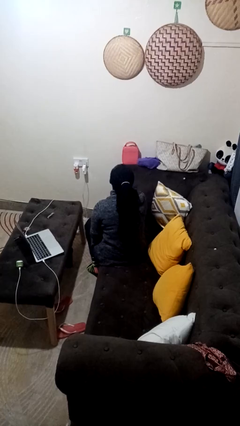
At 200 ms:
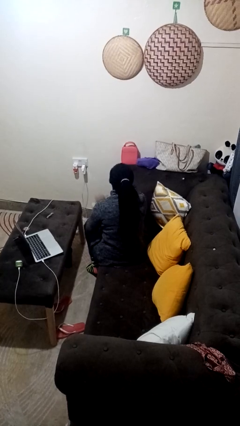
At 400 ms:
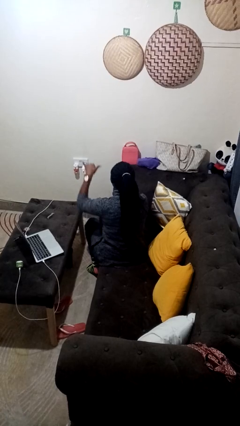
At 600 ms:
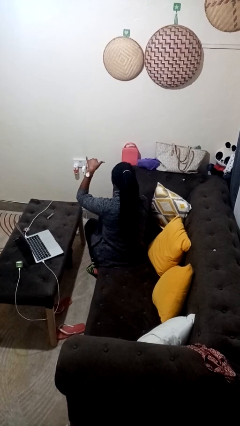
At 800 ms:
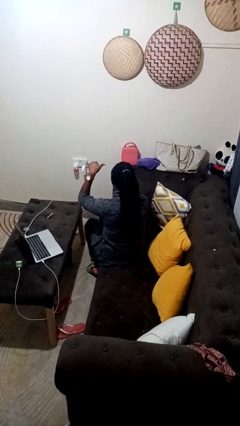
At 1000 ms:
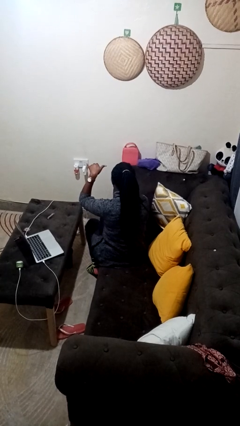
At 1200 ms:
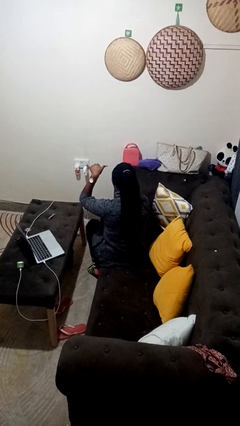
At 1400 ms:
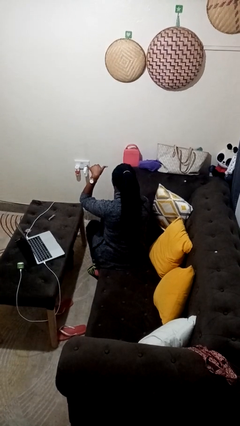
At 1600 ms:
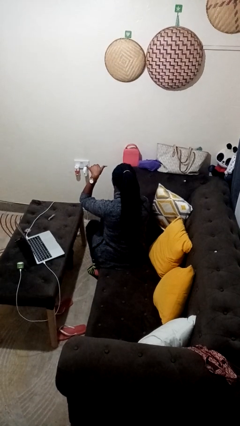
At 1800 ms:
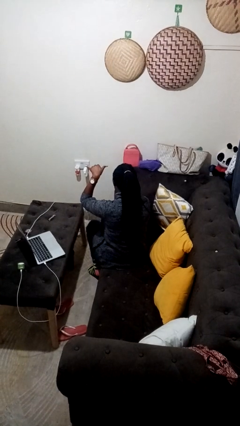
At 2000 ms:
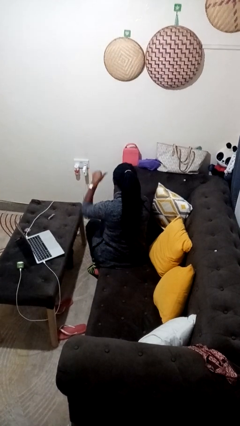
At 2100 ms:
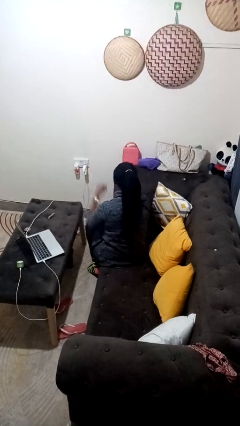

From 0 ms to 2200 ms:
person gestures hang loose

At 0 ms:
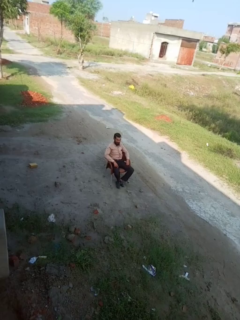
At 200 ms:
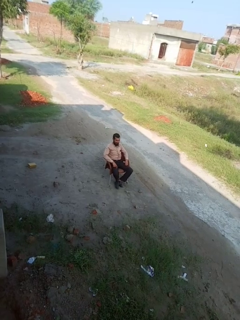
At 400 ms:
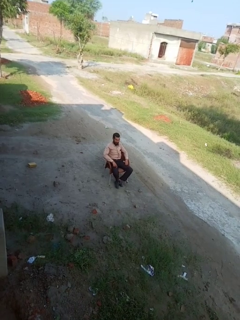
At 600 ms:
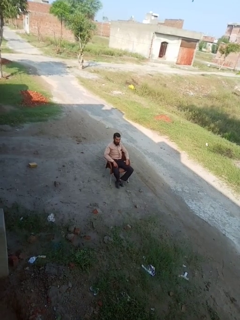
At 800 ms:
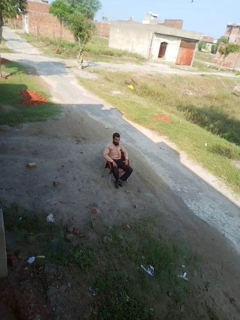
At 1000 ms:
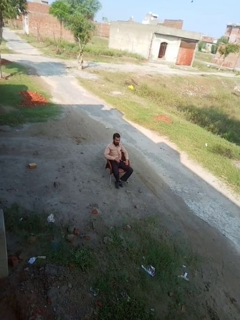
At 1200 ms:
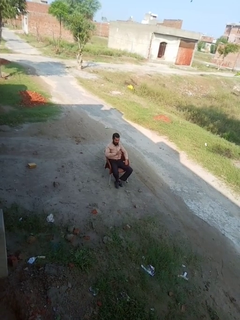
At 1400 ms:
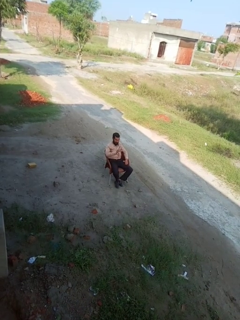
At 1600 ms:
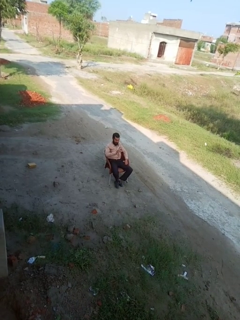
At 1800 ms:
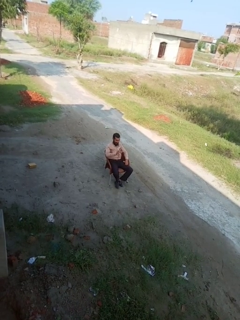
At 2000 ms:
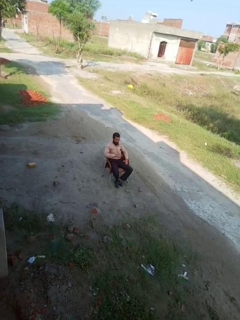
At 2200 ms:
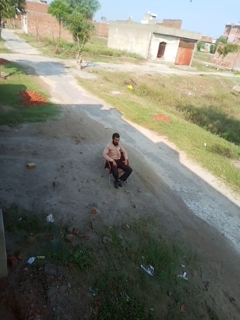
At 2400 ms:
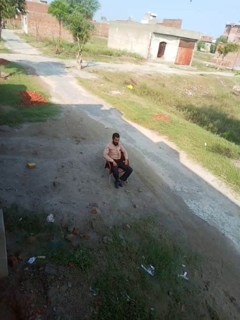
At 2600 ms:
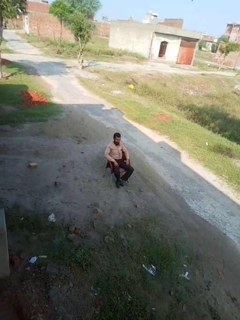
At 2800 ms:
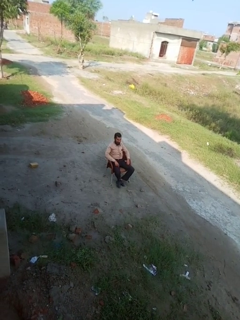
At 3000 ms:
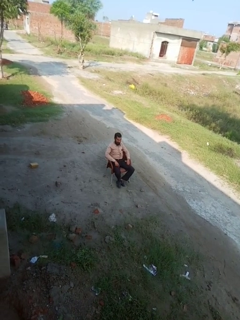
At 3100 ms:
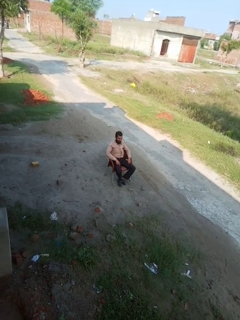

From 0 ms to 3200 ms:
person gestures number one

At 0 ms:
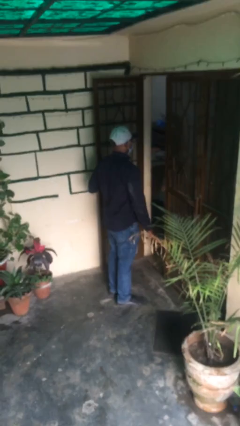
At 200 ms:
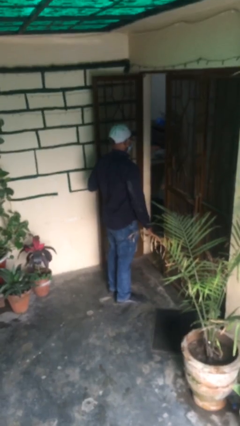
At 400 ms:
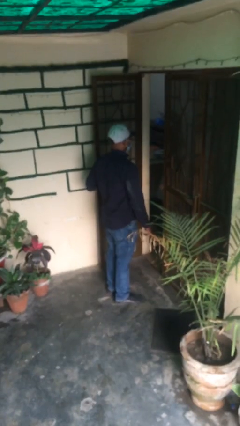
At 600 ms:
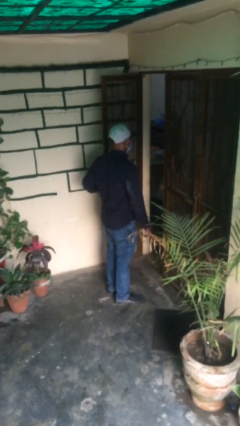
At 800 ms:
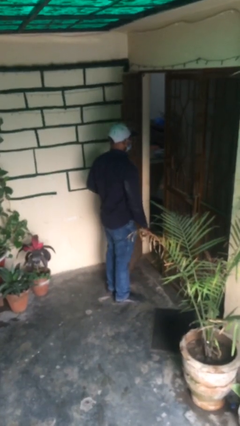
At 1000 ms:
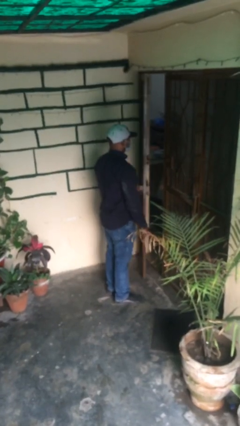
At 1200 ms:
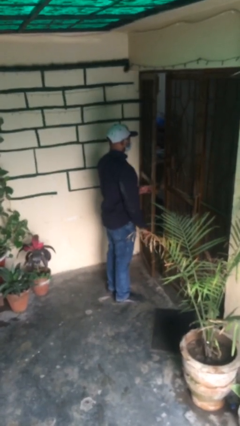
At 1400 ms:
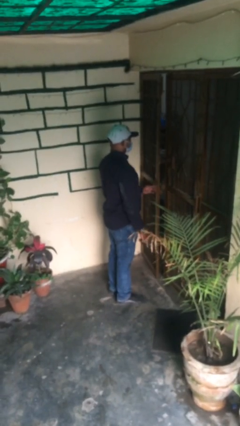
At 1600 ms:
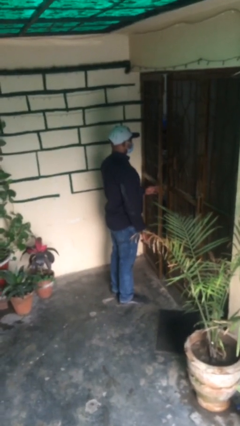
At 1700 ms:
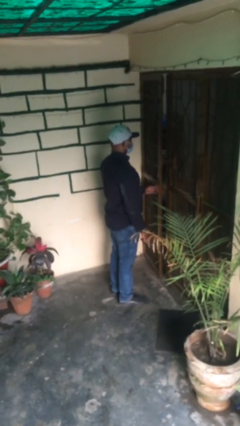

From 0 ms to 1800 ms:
person closes facility door

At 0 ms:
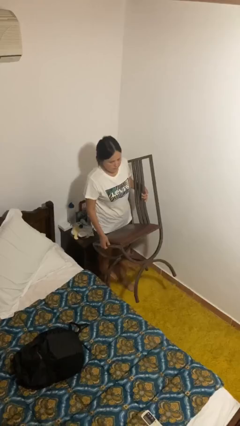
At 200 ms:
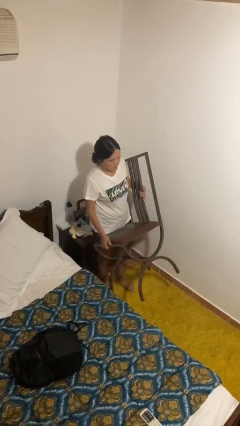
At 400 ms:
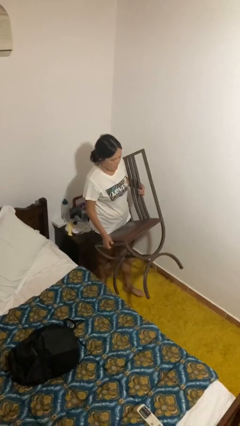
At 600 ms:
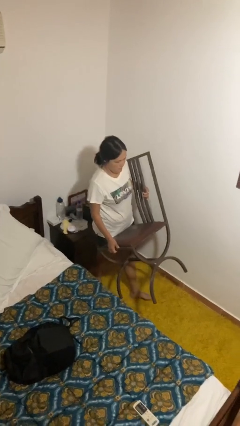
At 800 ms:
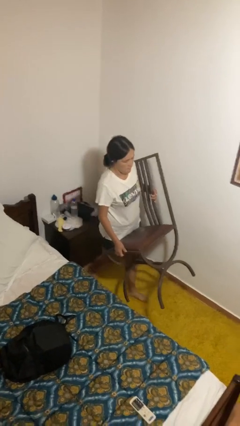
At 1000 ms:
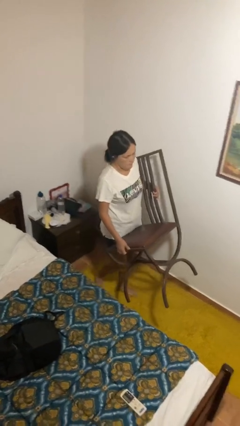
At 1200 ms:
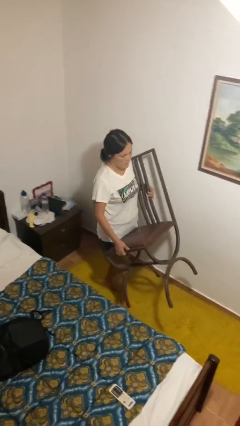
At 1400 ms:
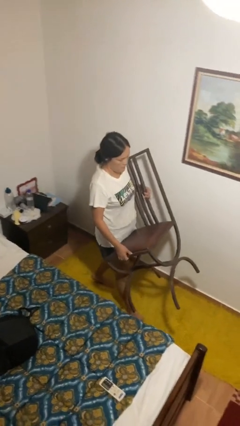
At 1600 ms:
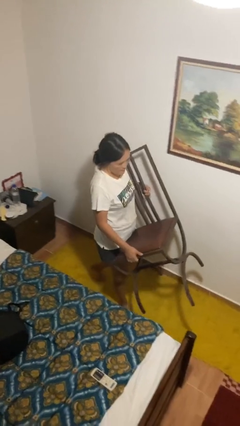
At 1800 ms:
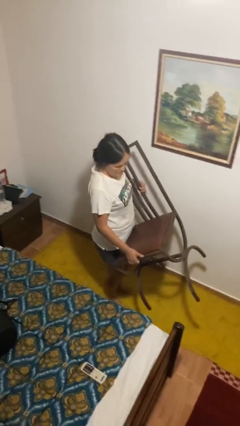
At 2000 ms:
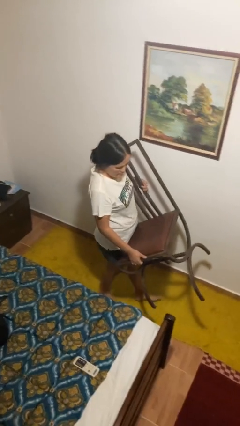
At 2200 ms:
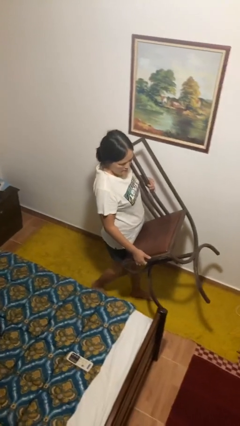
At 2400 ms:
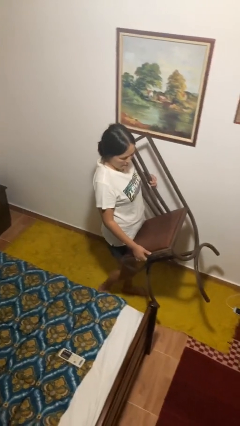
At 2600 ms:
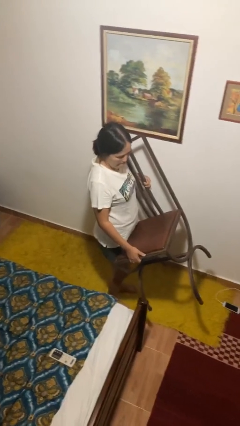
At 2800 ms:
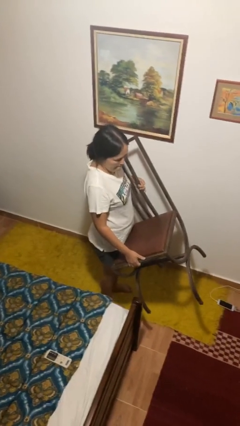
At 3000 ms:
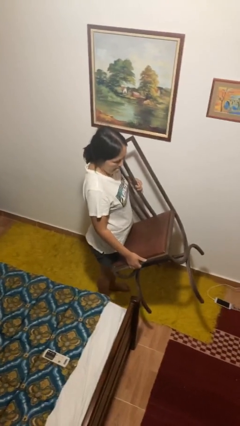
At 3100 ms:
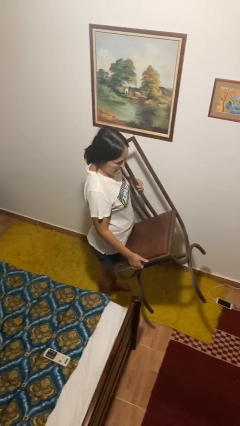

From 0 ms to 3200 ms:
person carries furniture

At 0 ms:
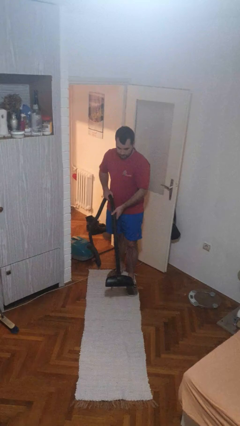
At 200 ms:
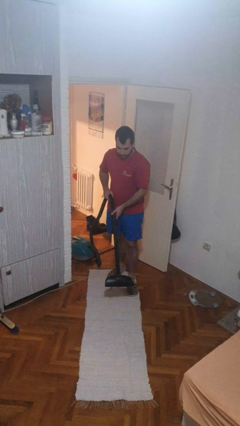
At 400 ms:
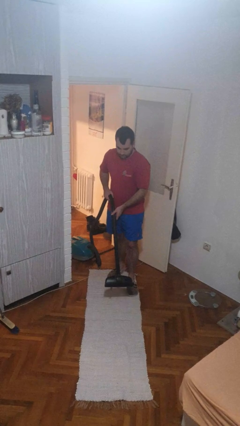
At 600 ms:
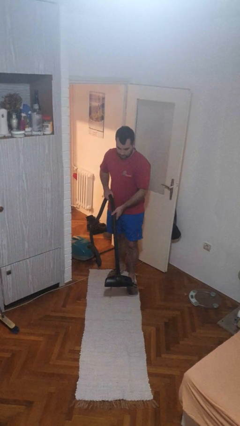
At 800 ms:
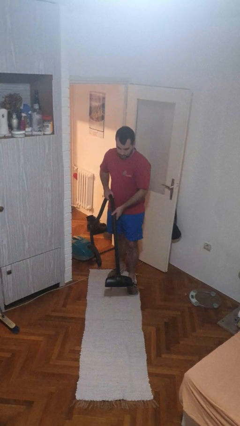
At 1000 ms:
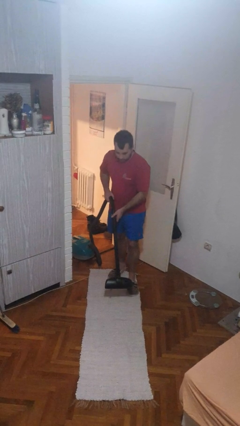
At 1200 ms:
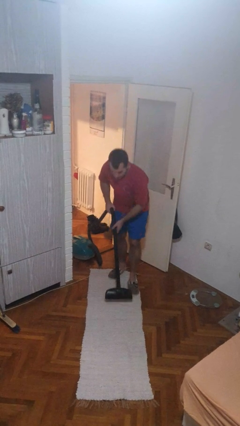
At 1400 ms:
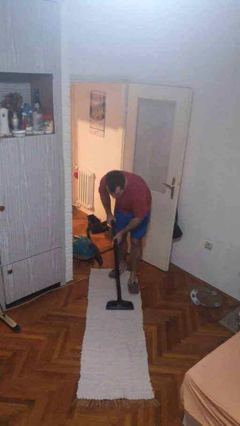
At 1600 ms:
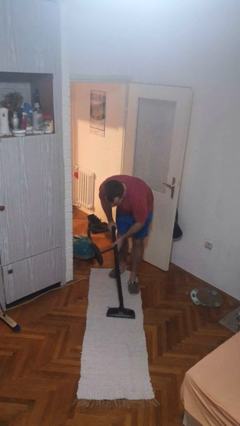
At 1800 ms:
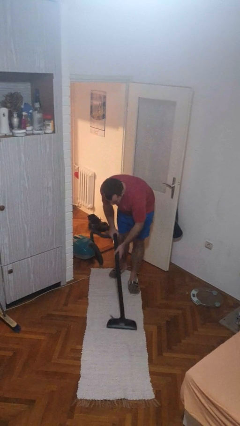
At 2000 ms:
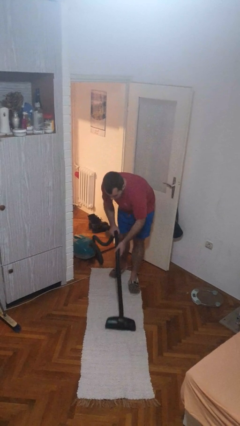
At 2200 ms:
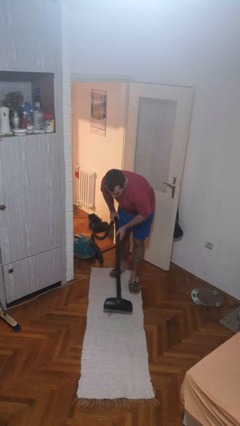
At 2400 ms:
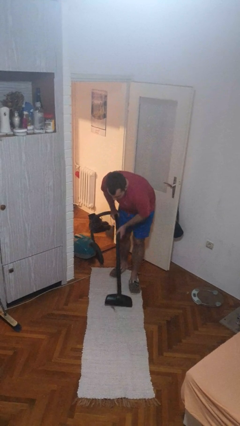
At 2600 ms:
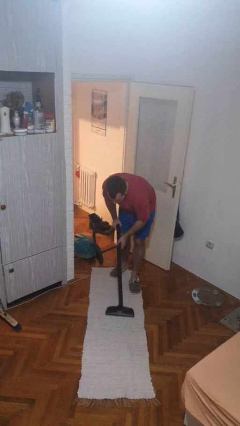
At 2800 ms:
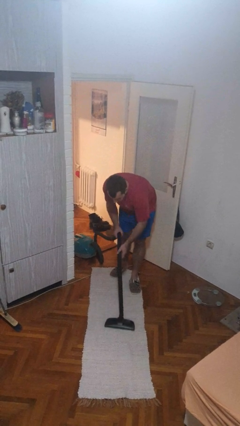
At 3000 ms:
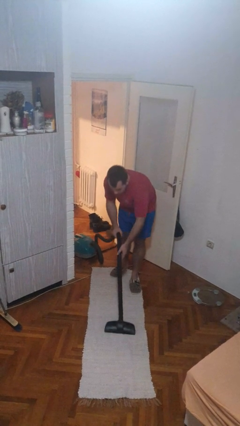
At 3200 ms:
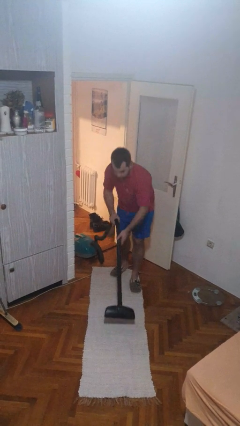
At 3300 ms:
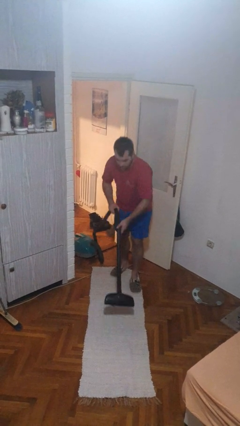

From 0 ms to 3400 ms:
person vacuums carpet

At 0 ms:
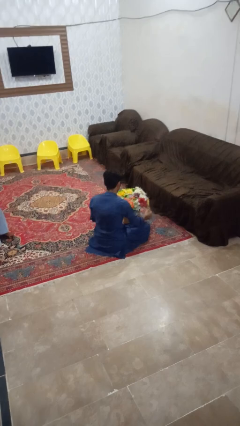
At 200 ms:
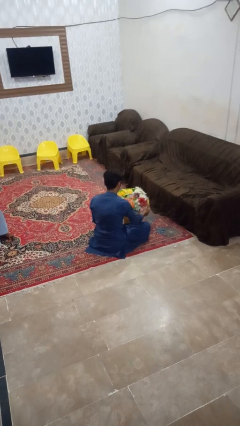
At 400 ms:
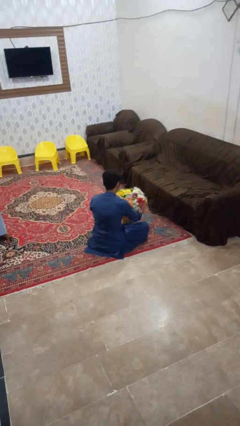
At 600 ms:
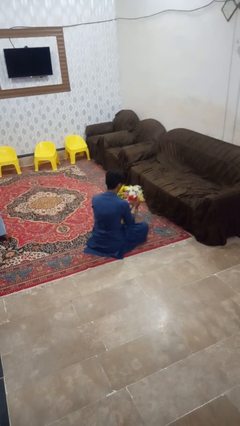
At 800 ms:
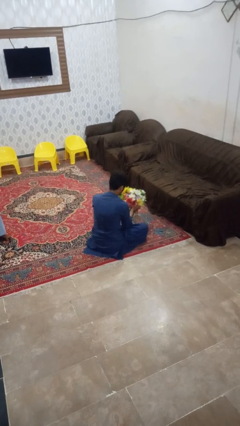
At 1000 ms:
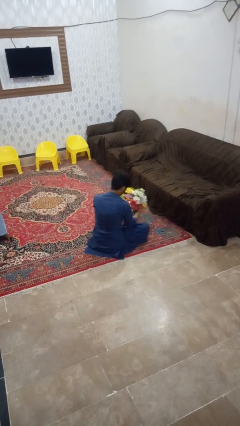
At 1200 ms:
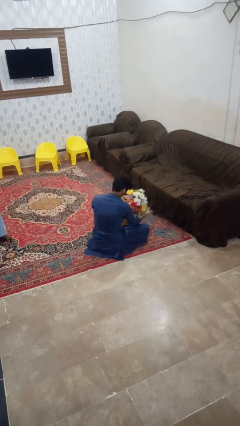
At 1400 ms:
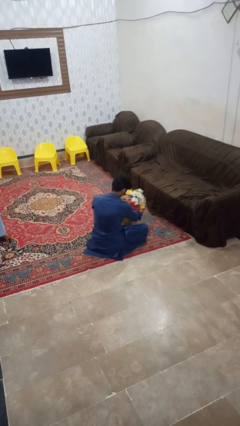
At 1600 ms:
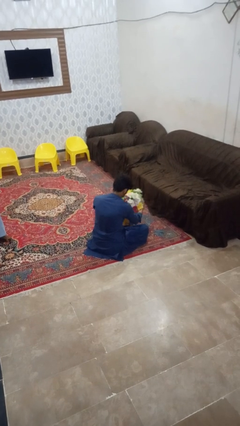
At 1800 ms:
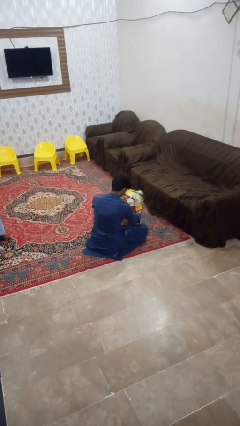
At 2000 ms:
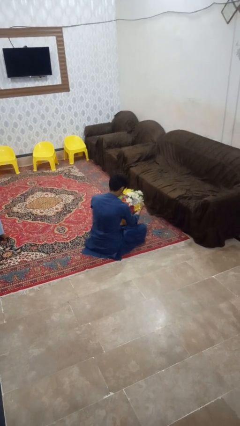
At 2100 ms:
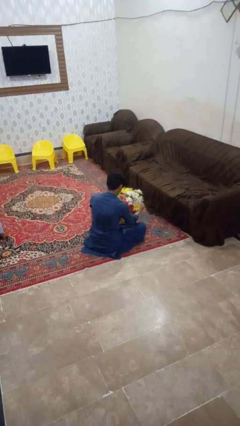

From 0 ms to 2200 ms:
person arranges flowers in vase

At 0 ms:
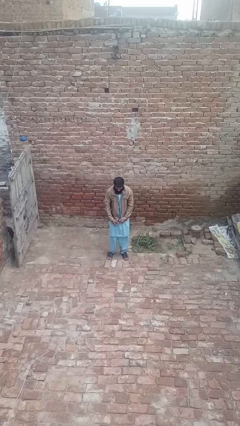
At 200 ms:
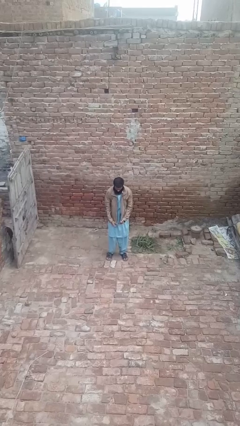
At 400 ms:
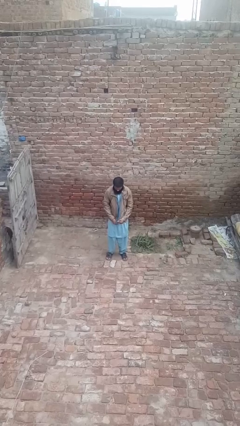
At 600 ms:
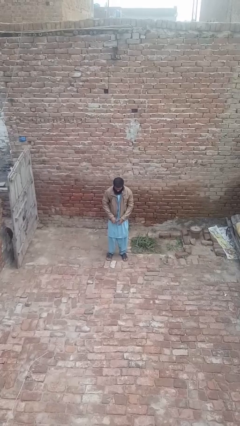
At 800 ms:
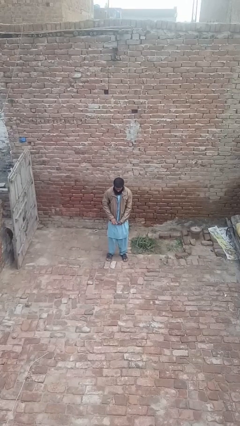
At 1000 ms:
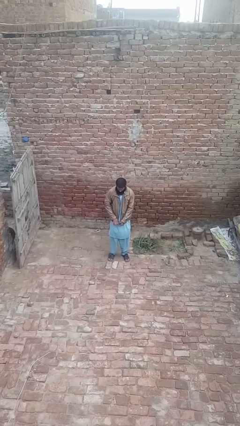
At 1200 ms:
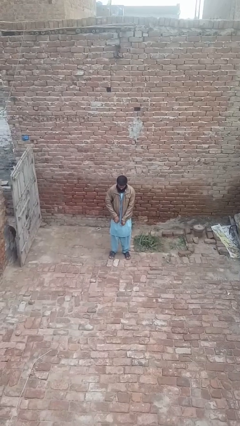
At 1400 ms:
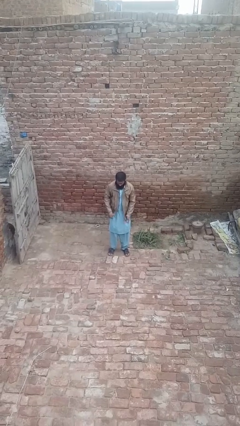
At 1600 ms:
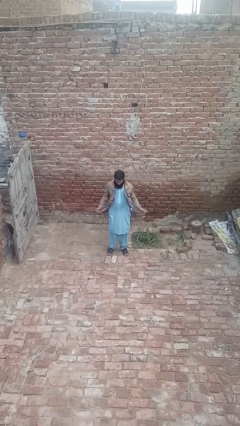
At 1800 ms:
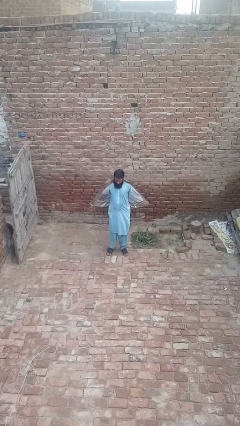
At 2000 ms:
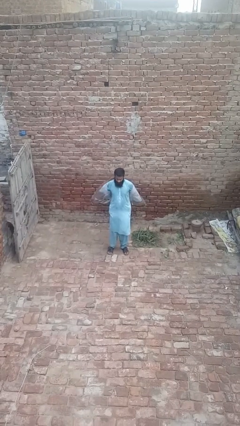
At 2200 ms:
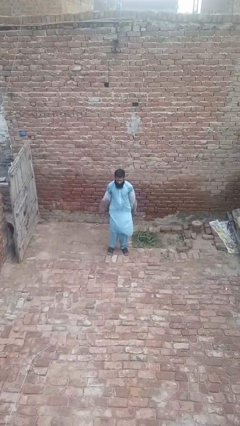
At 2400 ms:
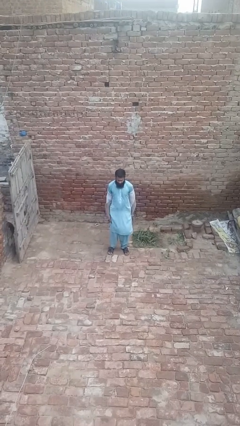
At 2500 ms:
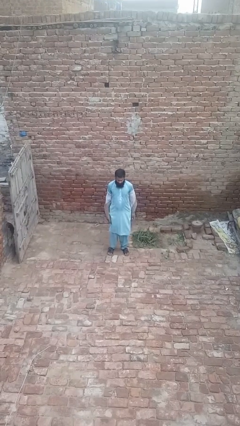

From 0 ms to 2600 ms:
person takes off jacket
